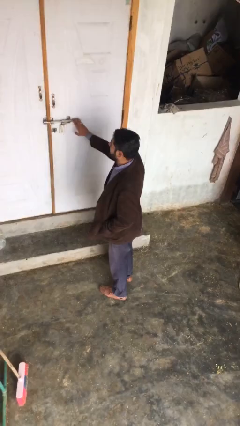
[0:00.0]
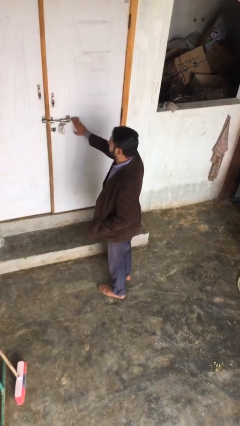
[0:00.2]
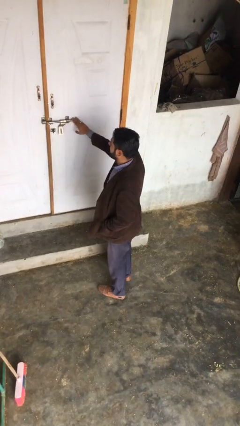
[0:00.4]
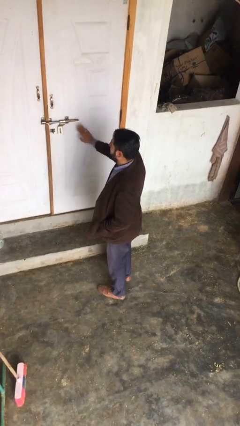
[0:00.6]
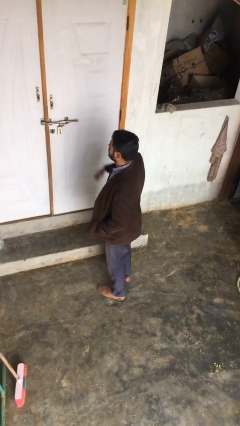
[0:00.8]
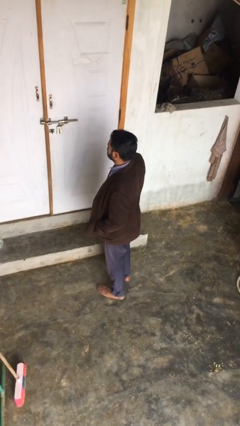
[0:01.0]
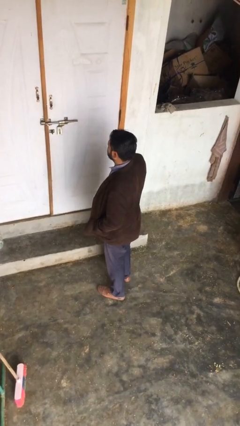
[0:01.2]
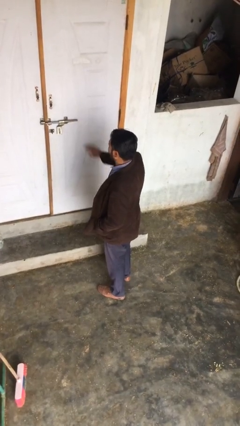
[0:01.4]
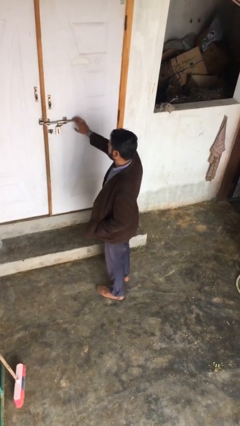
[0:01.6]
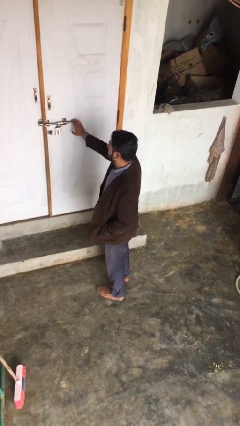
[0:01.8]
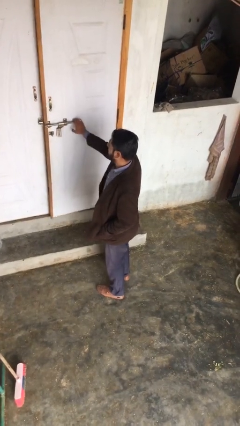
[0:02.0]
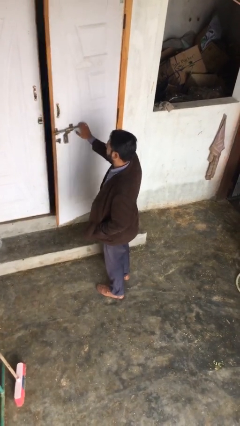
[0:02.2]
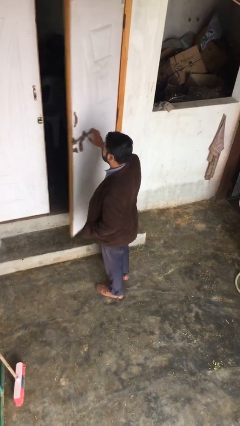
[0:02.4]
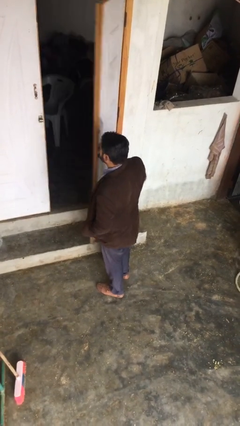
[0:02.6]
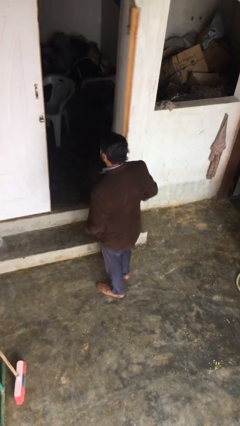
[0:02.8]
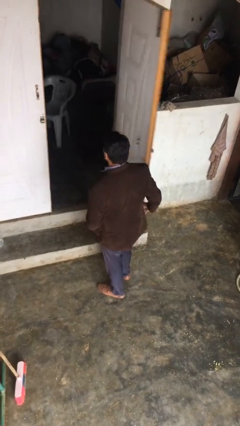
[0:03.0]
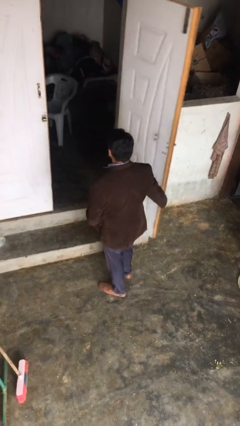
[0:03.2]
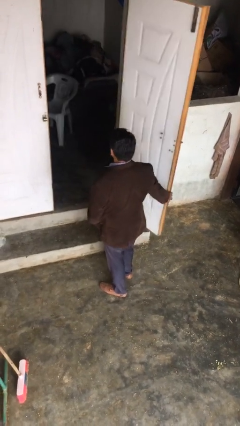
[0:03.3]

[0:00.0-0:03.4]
person opens facility door

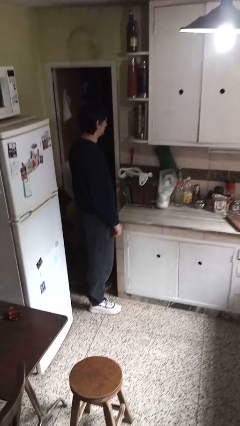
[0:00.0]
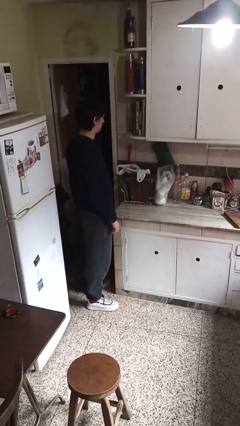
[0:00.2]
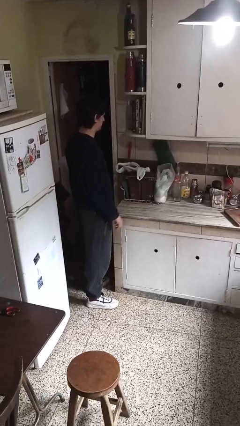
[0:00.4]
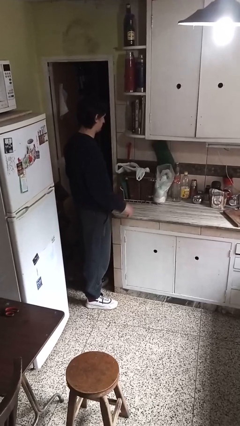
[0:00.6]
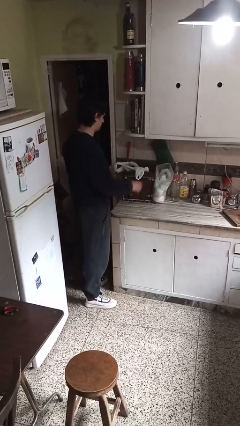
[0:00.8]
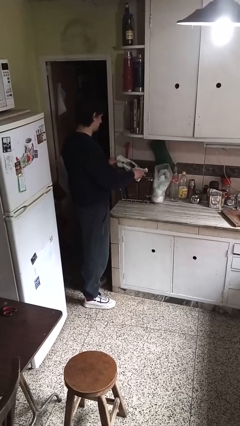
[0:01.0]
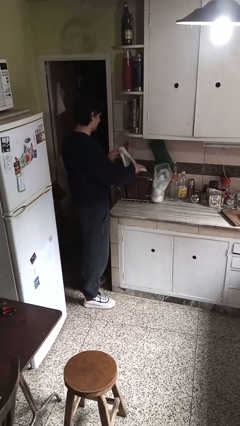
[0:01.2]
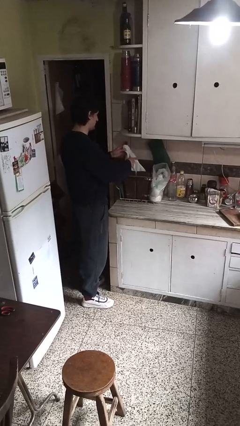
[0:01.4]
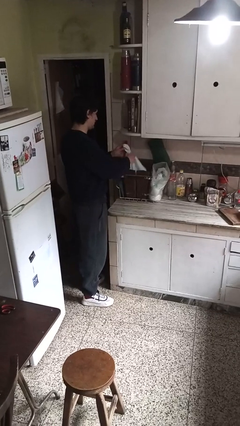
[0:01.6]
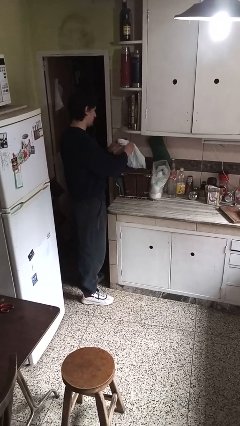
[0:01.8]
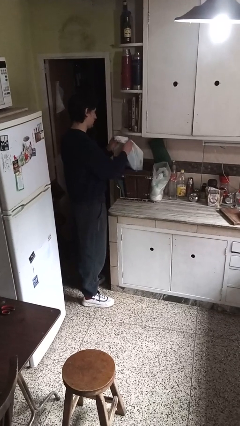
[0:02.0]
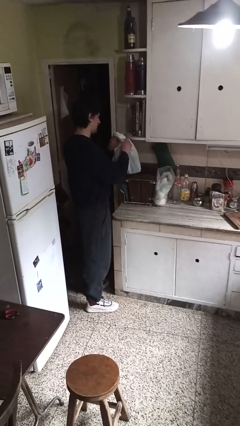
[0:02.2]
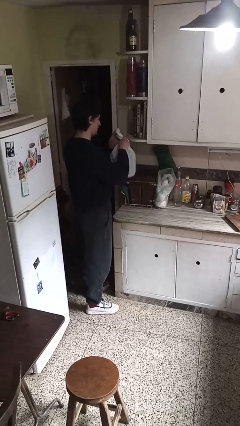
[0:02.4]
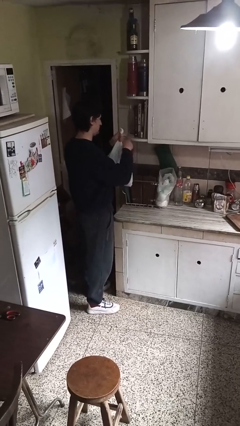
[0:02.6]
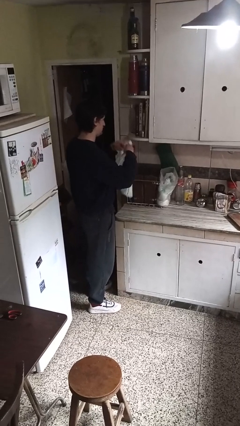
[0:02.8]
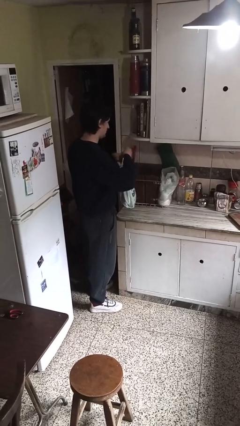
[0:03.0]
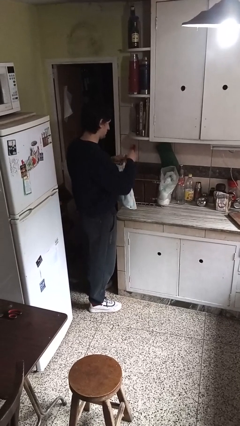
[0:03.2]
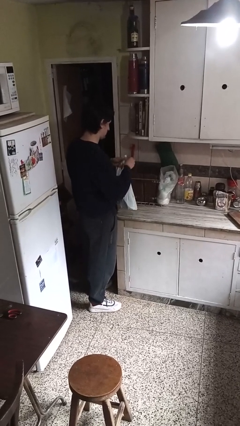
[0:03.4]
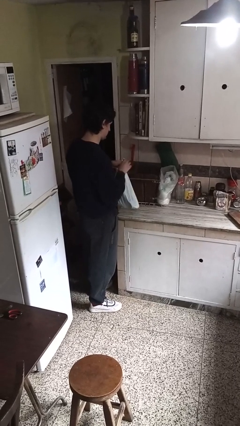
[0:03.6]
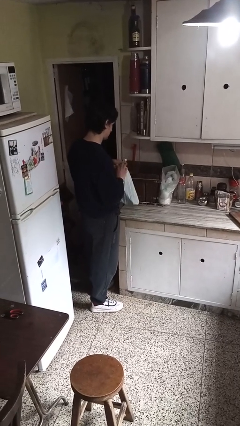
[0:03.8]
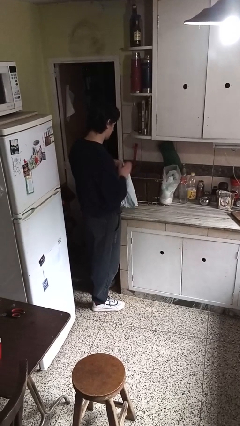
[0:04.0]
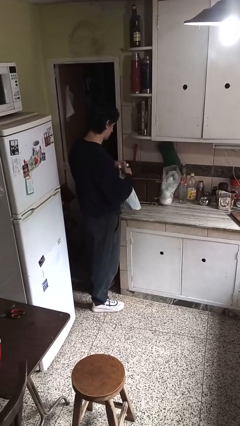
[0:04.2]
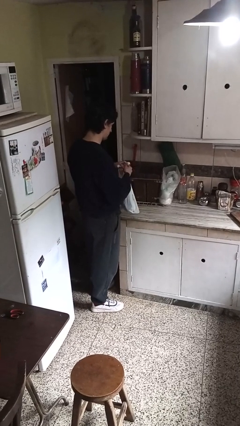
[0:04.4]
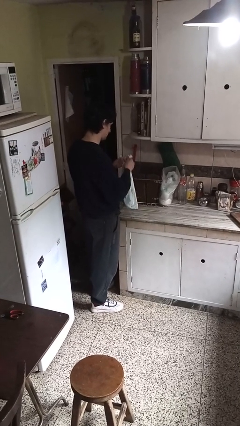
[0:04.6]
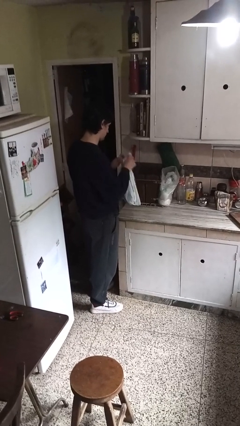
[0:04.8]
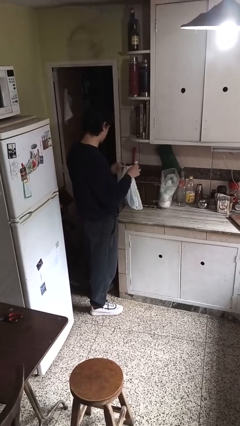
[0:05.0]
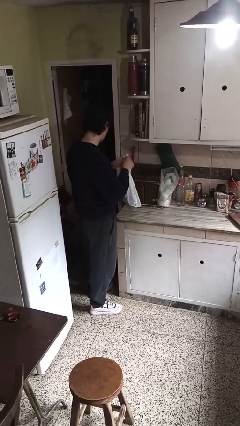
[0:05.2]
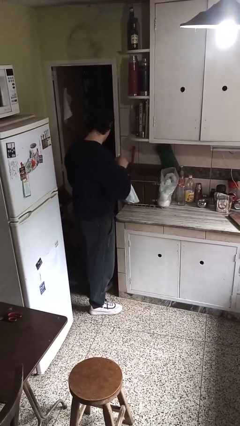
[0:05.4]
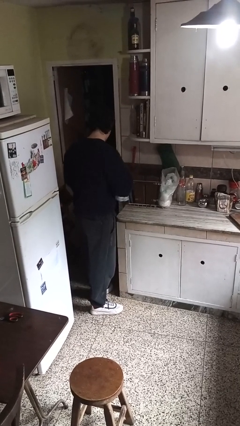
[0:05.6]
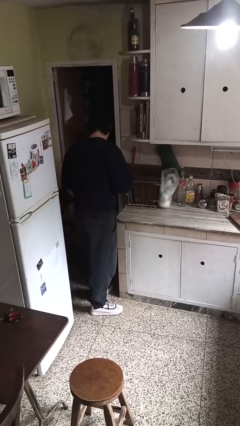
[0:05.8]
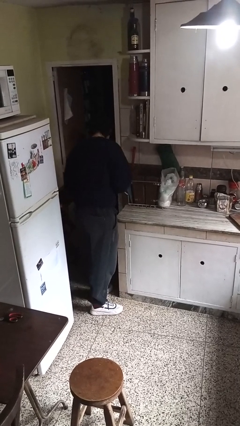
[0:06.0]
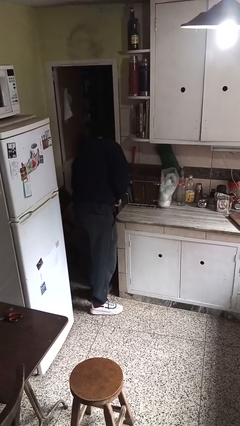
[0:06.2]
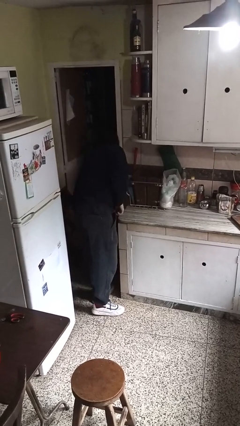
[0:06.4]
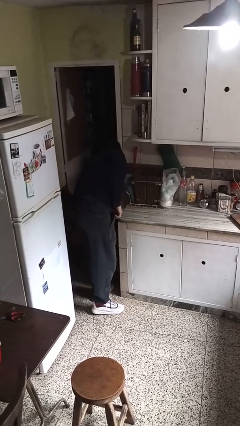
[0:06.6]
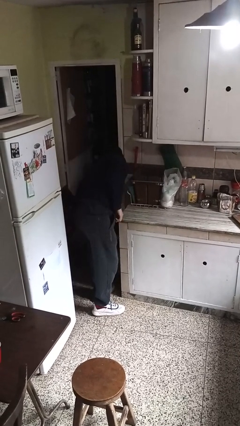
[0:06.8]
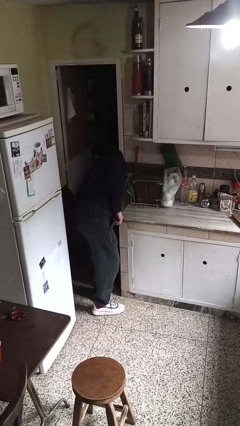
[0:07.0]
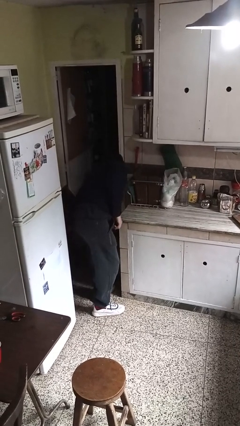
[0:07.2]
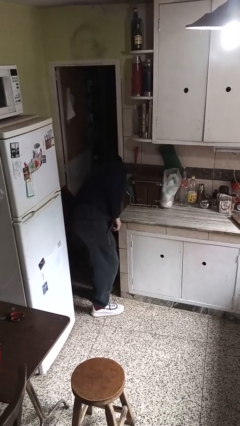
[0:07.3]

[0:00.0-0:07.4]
person removes trashbag from trashcan

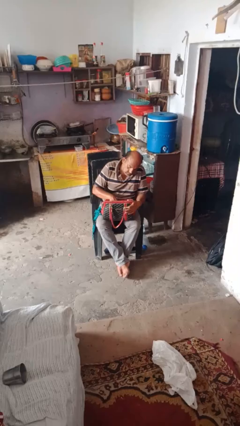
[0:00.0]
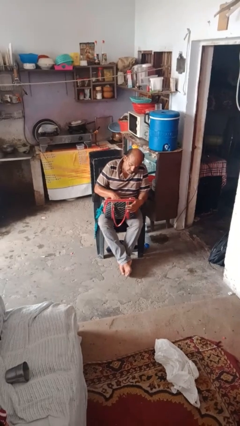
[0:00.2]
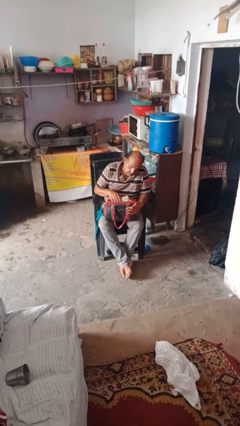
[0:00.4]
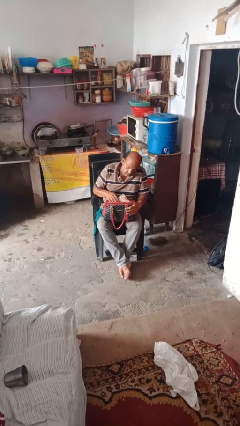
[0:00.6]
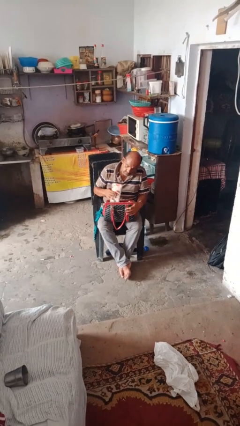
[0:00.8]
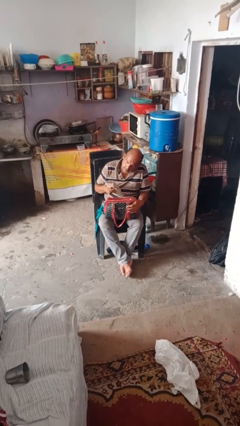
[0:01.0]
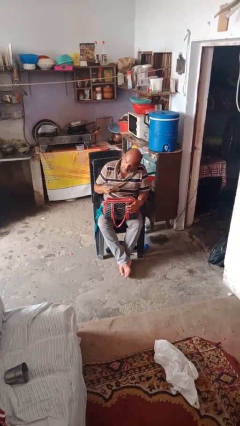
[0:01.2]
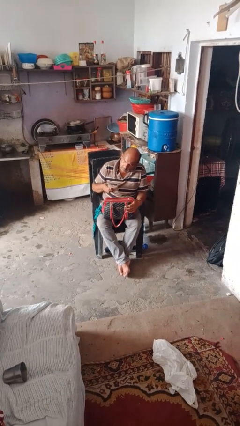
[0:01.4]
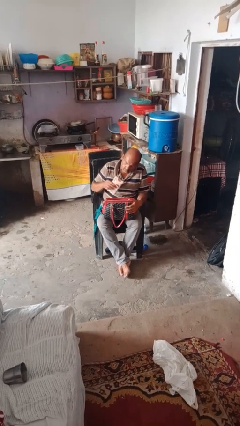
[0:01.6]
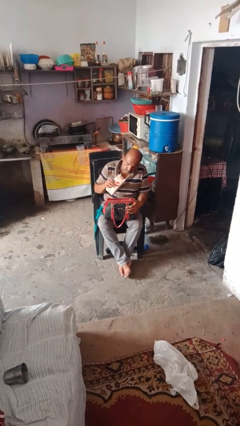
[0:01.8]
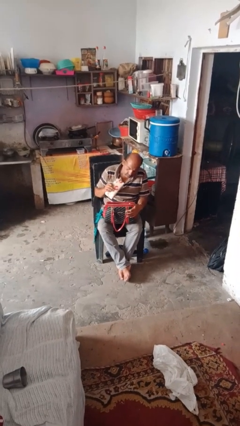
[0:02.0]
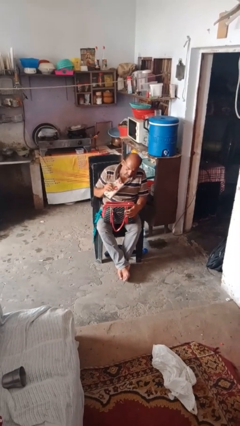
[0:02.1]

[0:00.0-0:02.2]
person takes object from purse

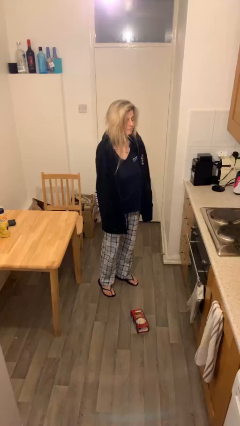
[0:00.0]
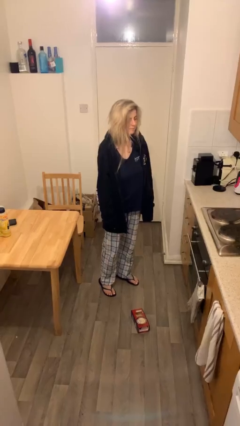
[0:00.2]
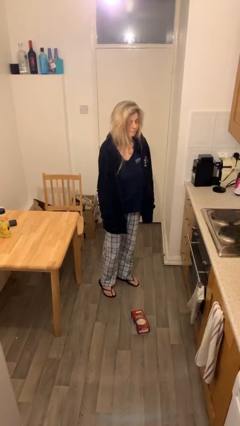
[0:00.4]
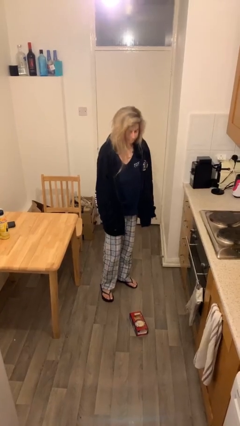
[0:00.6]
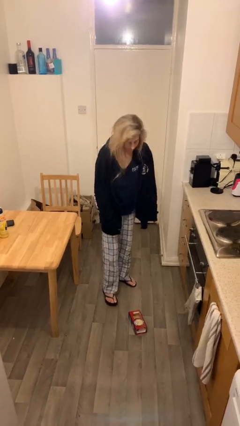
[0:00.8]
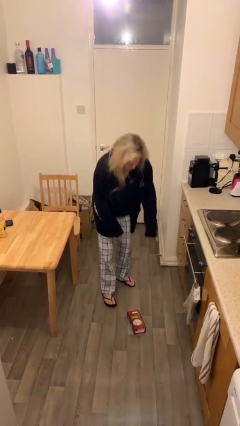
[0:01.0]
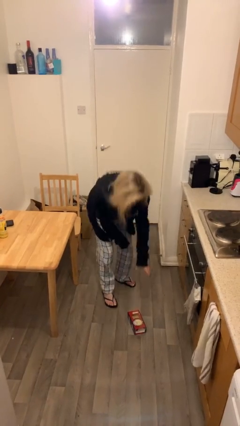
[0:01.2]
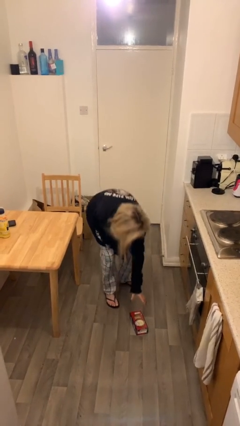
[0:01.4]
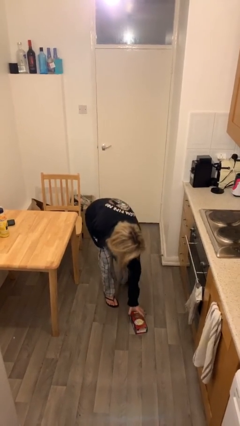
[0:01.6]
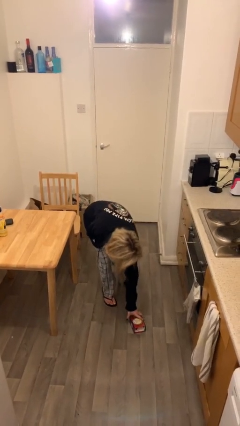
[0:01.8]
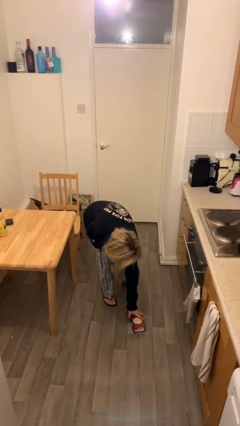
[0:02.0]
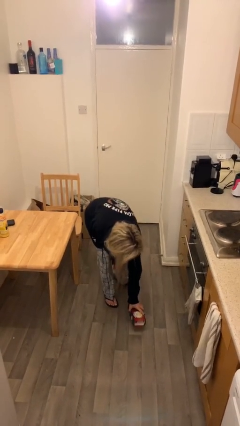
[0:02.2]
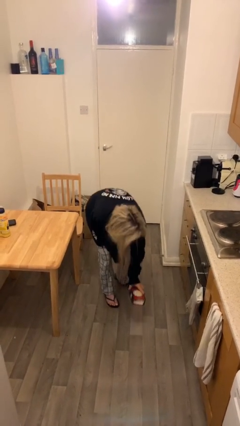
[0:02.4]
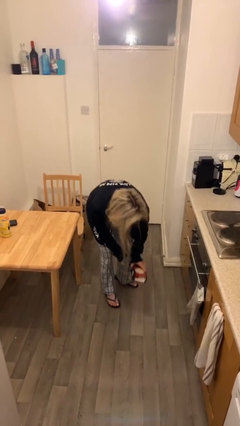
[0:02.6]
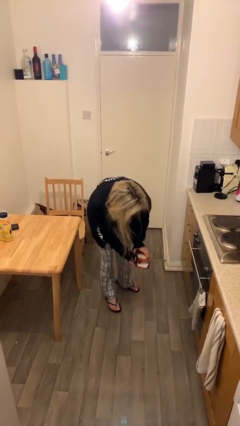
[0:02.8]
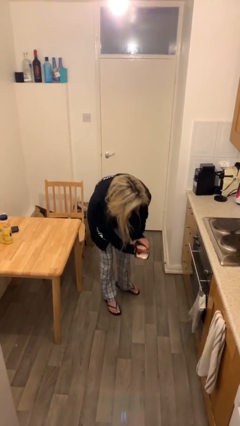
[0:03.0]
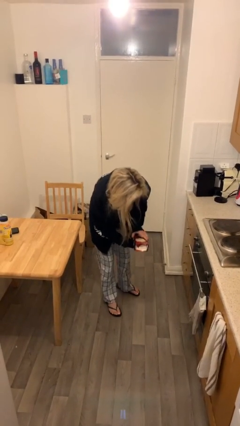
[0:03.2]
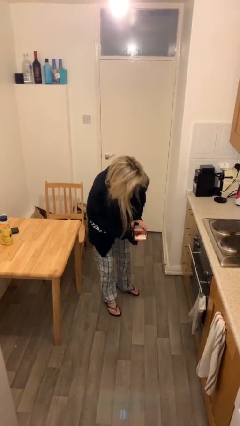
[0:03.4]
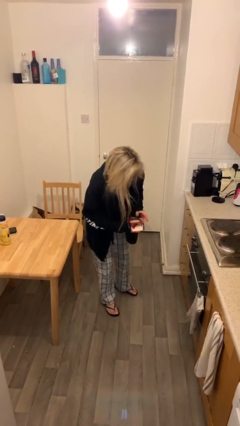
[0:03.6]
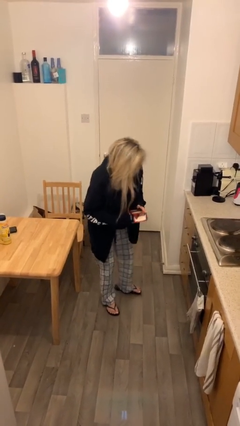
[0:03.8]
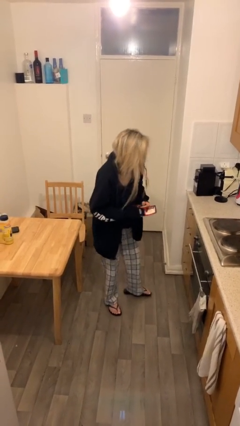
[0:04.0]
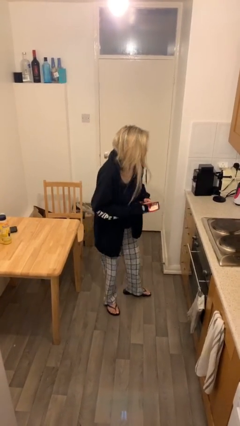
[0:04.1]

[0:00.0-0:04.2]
person picks up object from floor

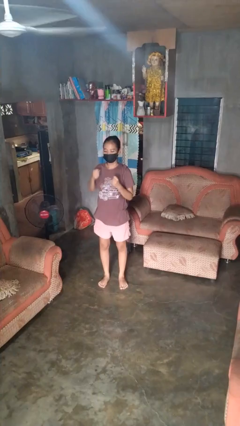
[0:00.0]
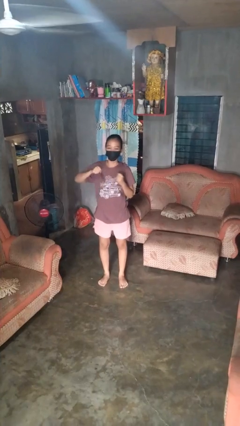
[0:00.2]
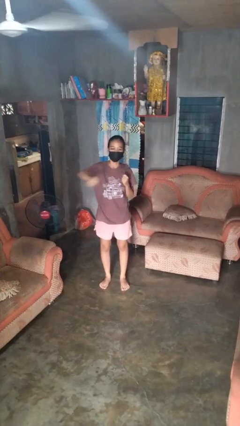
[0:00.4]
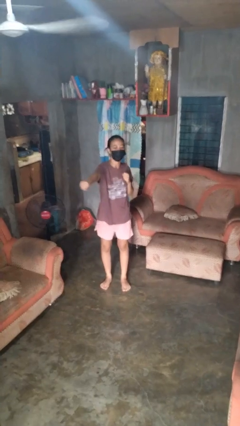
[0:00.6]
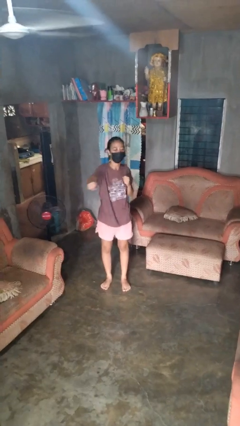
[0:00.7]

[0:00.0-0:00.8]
person punches
